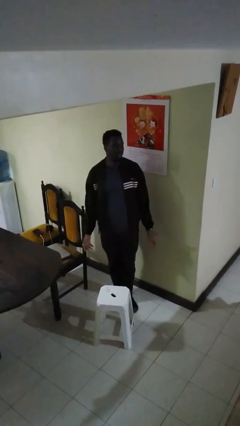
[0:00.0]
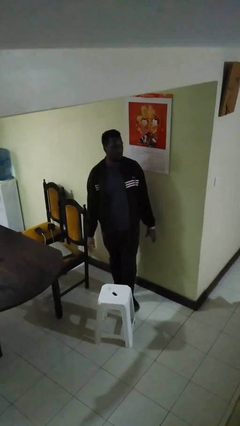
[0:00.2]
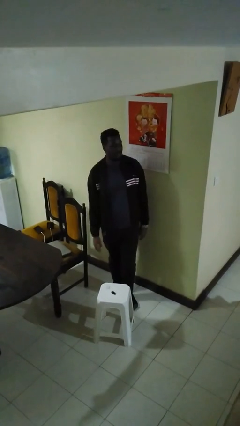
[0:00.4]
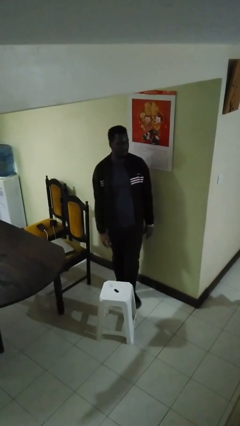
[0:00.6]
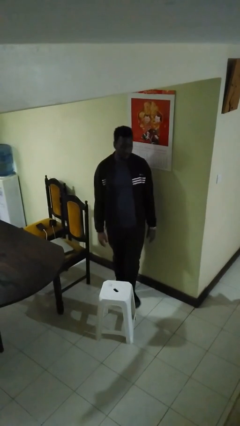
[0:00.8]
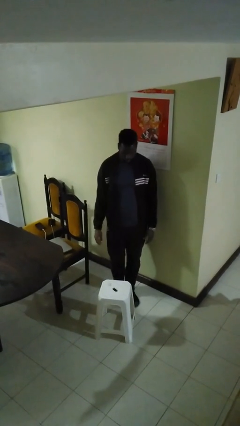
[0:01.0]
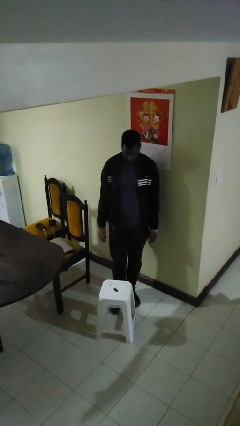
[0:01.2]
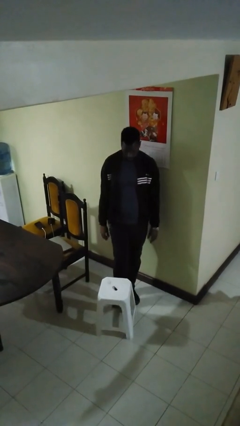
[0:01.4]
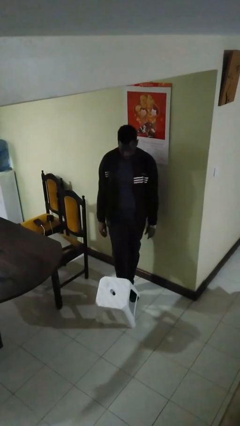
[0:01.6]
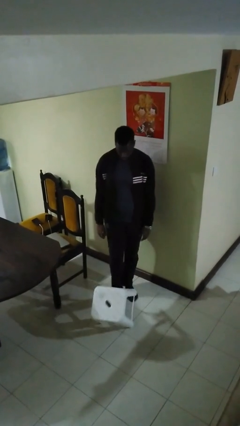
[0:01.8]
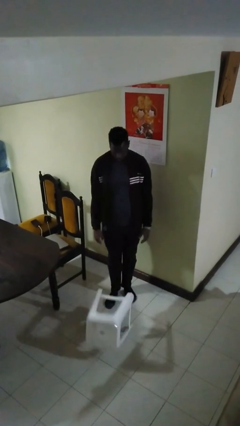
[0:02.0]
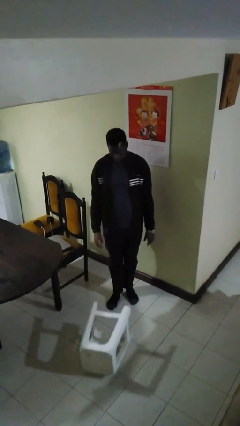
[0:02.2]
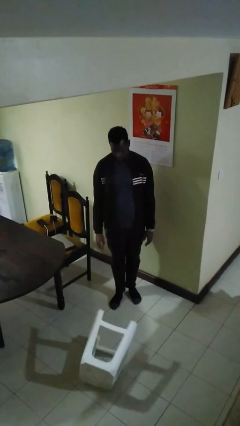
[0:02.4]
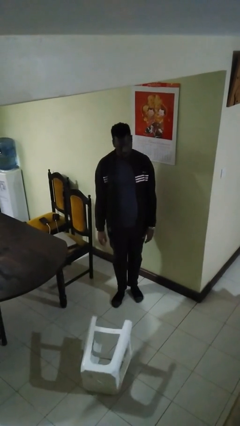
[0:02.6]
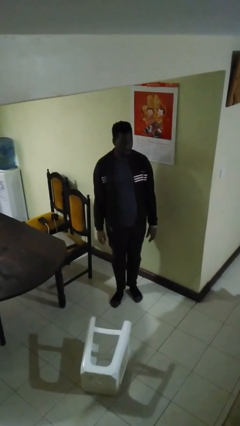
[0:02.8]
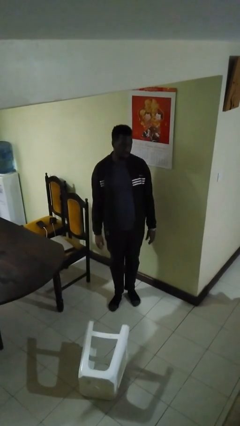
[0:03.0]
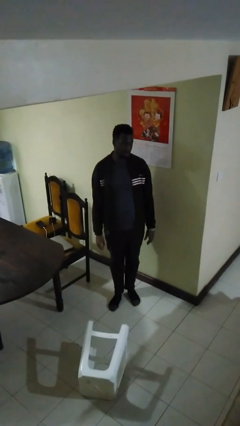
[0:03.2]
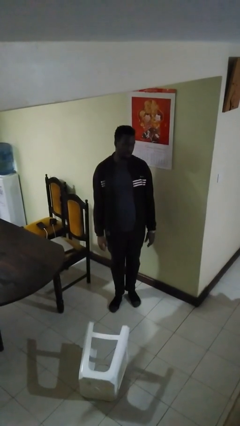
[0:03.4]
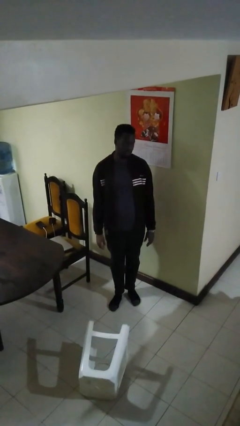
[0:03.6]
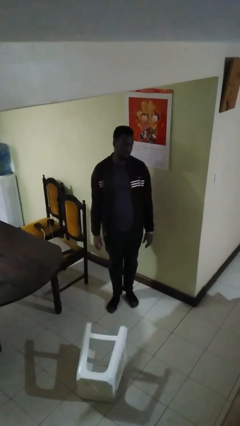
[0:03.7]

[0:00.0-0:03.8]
person knocks over furniture

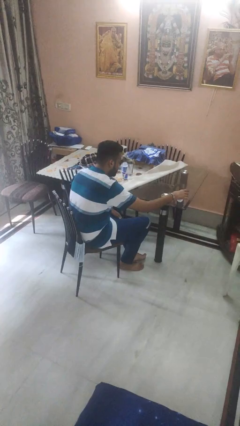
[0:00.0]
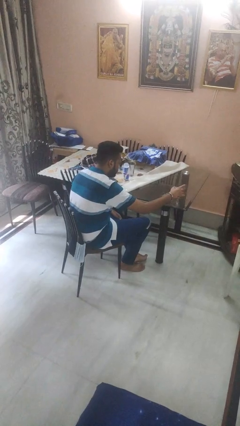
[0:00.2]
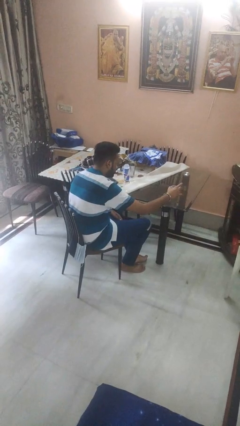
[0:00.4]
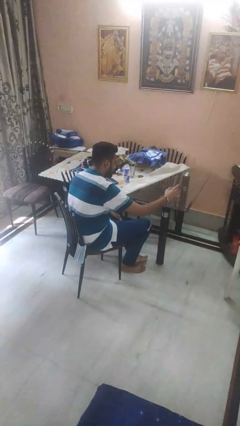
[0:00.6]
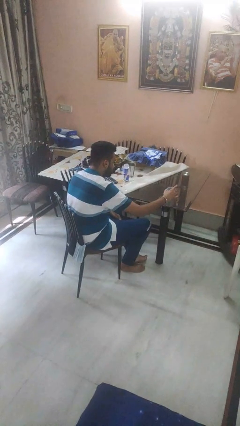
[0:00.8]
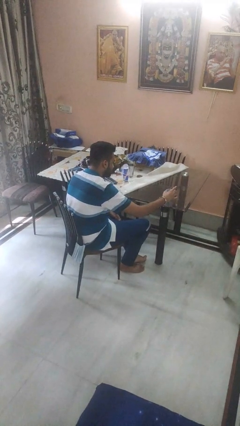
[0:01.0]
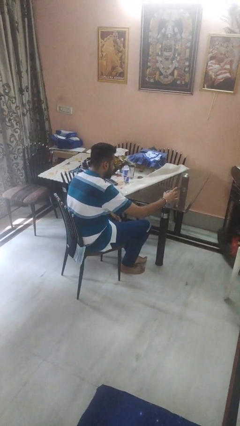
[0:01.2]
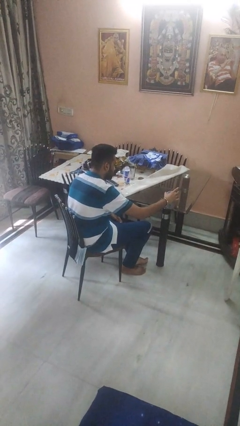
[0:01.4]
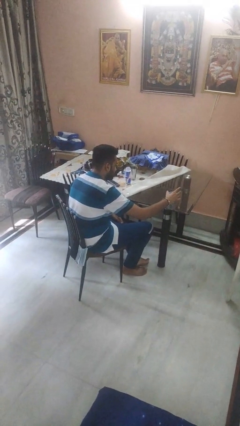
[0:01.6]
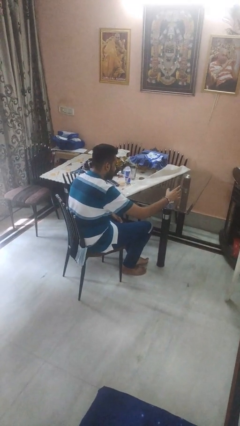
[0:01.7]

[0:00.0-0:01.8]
person sets upright glass

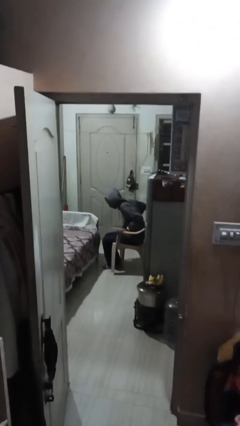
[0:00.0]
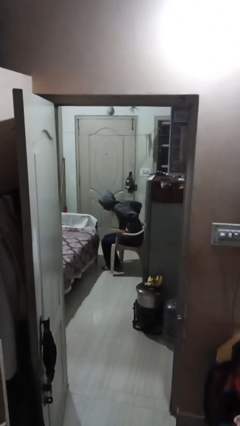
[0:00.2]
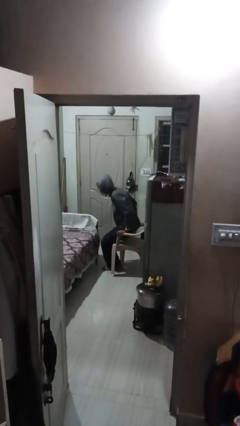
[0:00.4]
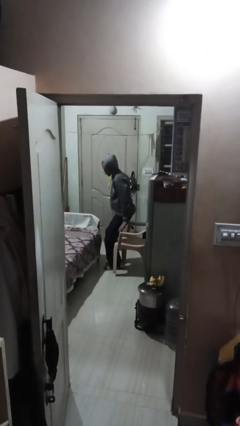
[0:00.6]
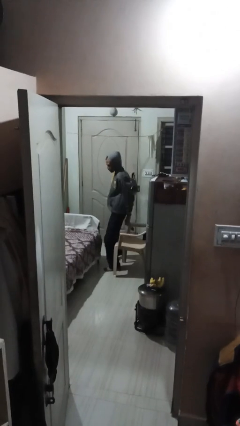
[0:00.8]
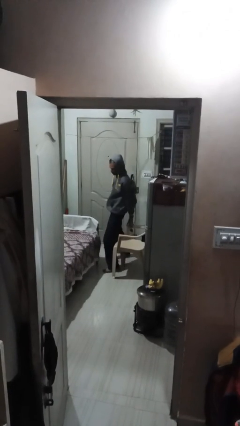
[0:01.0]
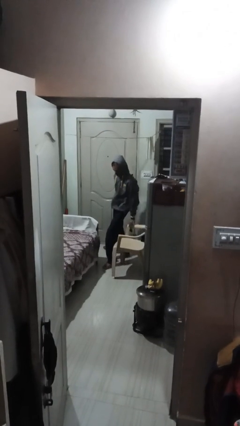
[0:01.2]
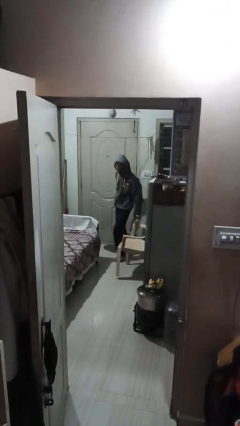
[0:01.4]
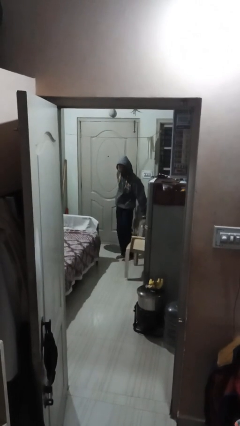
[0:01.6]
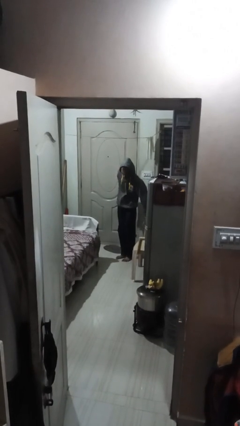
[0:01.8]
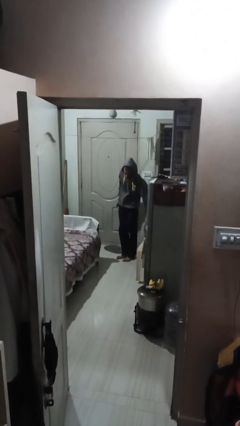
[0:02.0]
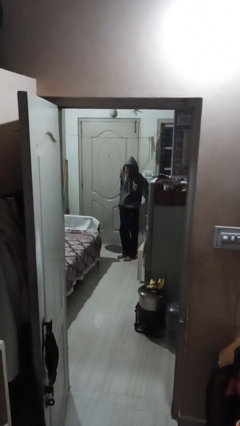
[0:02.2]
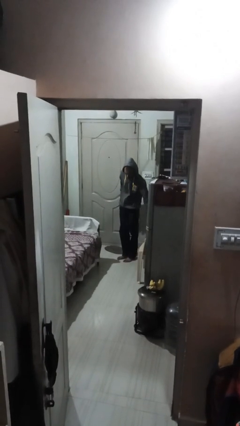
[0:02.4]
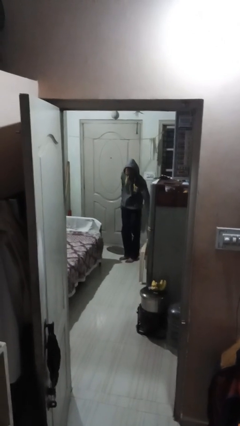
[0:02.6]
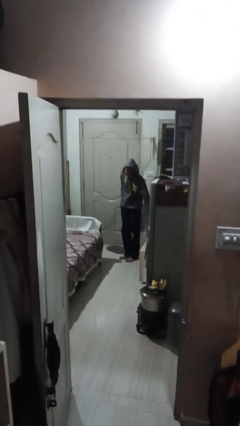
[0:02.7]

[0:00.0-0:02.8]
person stands up

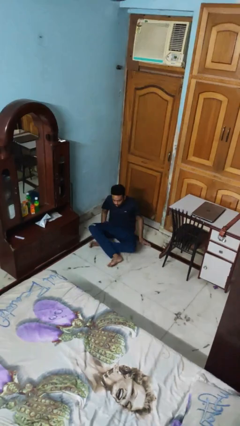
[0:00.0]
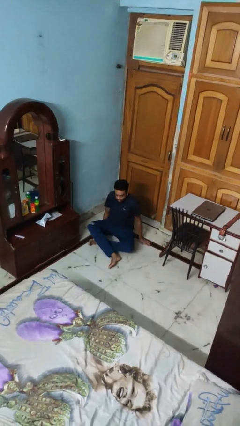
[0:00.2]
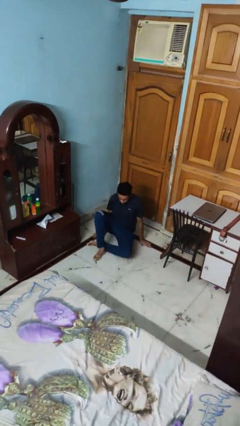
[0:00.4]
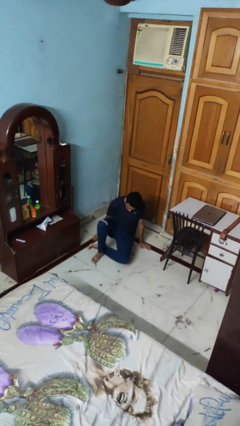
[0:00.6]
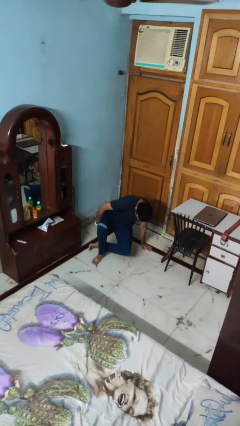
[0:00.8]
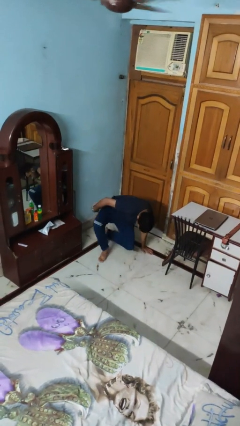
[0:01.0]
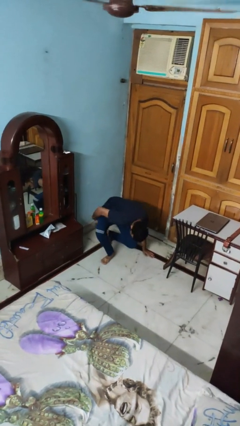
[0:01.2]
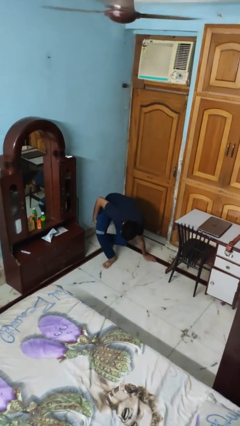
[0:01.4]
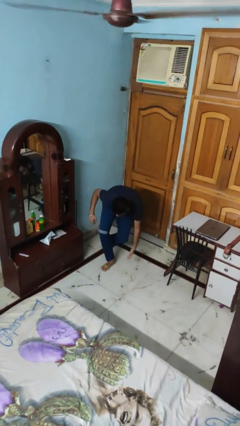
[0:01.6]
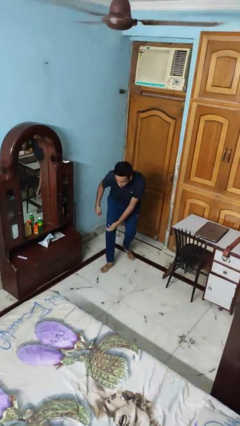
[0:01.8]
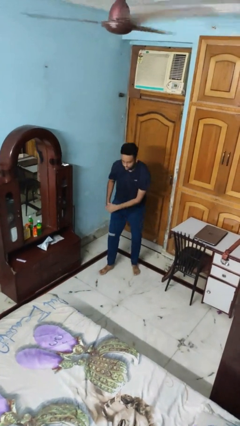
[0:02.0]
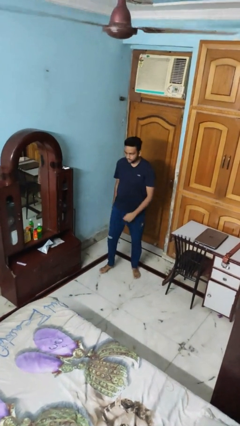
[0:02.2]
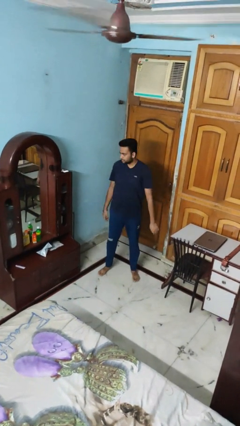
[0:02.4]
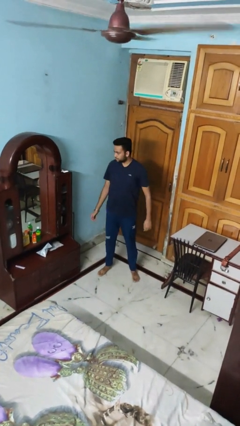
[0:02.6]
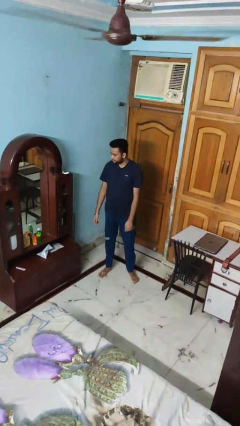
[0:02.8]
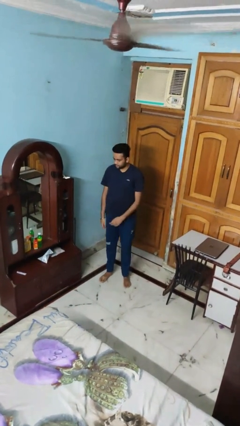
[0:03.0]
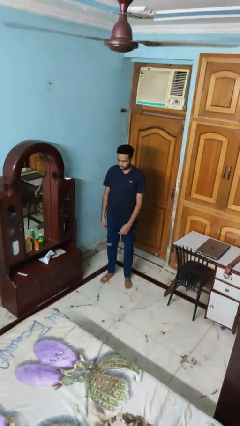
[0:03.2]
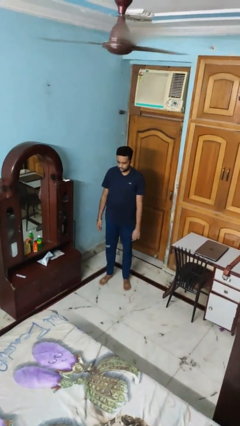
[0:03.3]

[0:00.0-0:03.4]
person stands up from floor

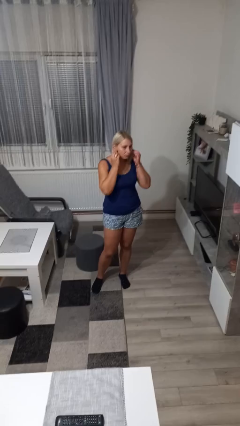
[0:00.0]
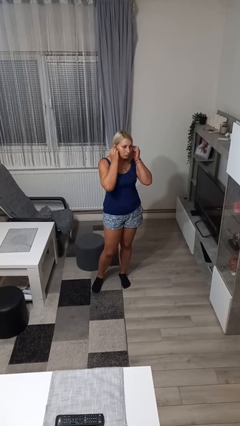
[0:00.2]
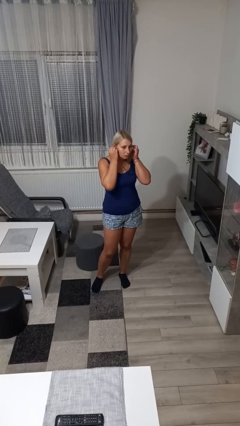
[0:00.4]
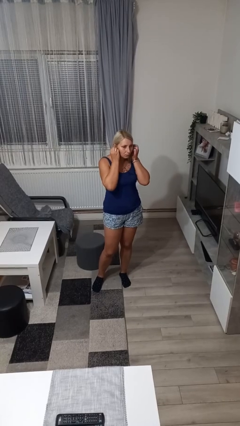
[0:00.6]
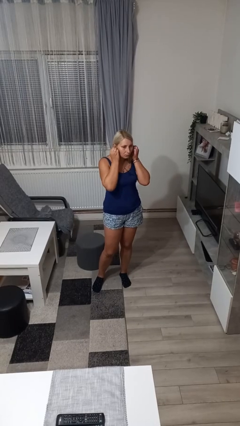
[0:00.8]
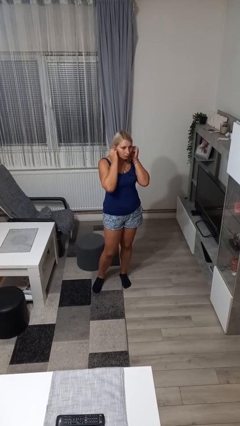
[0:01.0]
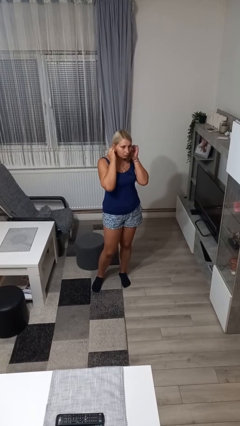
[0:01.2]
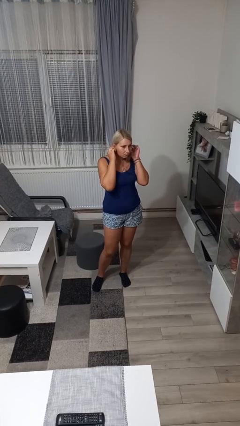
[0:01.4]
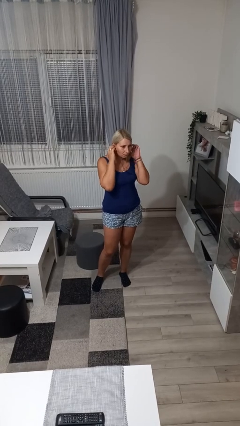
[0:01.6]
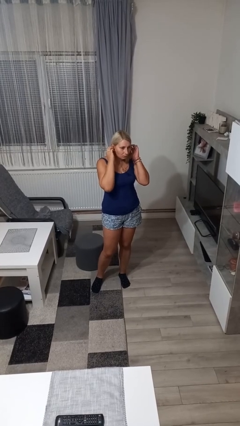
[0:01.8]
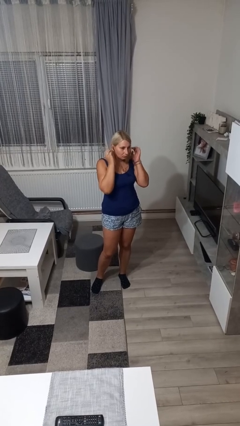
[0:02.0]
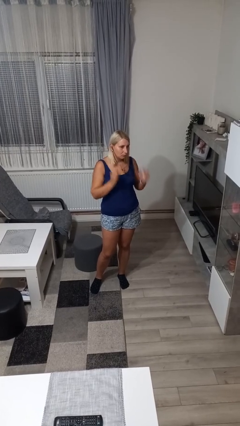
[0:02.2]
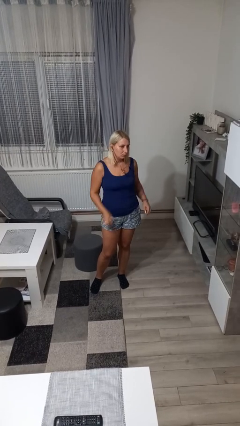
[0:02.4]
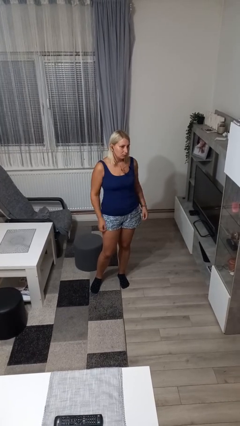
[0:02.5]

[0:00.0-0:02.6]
person puts on headphones

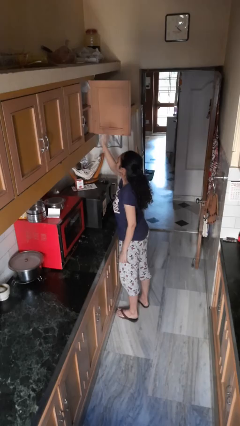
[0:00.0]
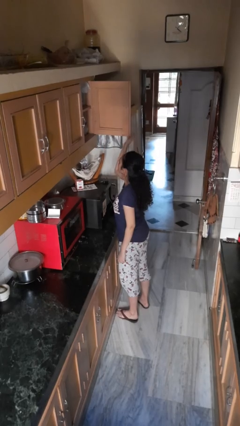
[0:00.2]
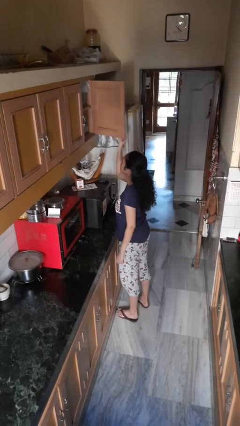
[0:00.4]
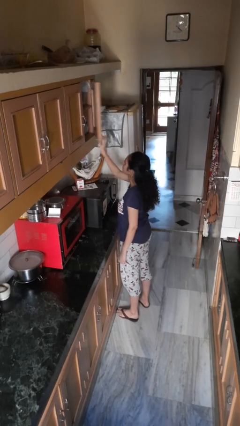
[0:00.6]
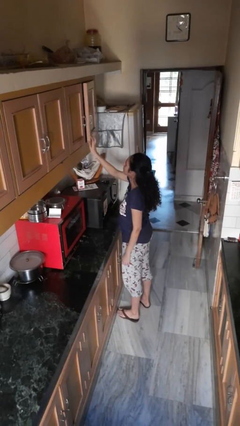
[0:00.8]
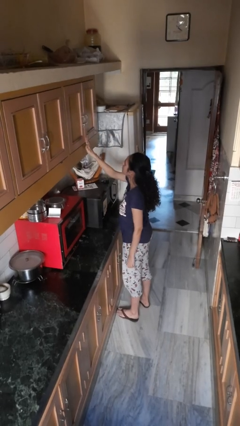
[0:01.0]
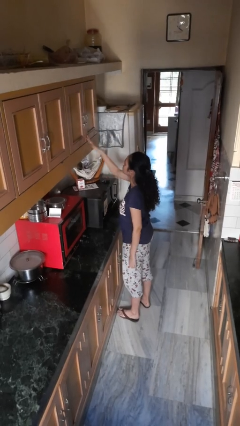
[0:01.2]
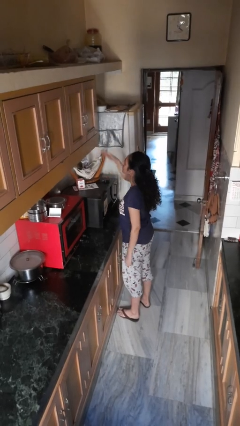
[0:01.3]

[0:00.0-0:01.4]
person puts object in cabinet

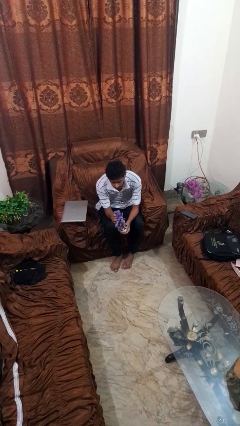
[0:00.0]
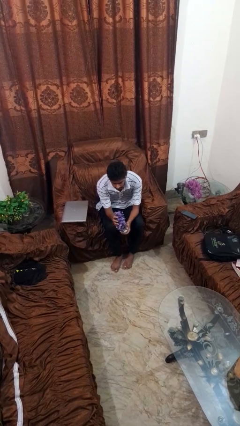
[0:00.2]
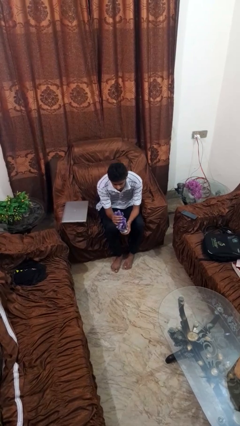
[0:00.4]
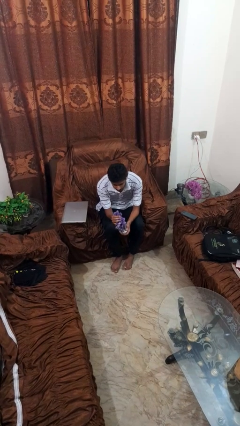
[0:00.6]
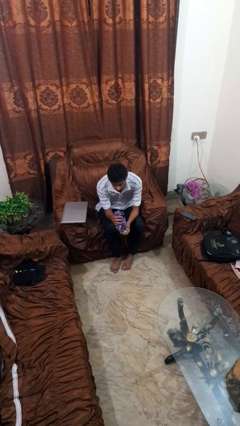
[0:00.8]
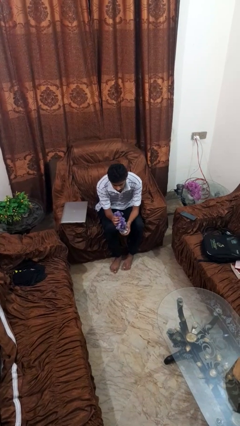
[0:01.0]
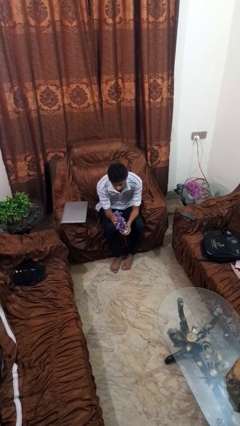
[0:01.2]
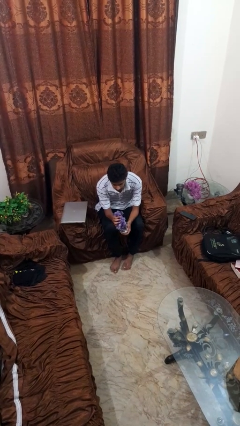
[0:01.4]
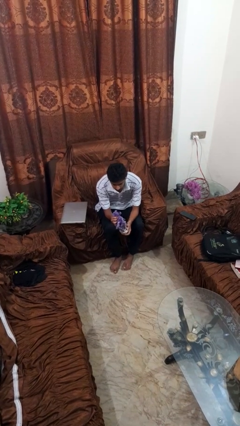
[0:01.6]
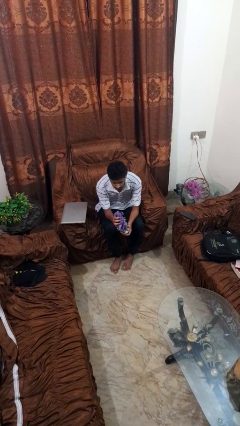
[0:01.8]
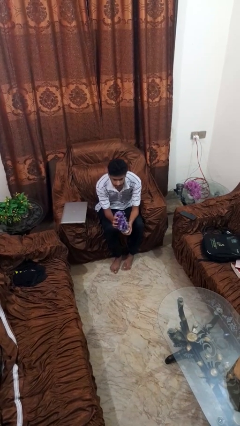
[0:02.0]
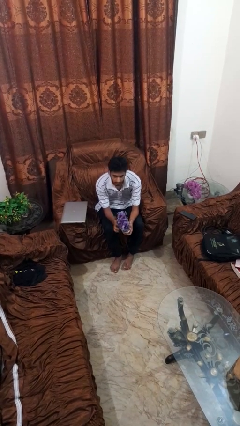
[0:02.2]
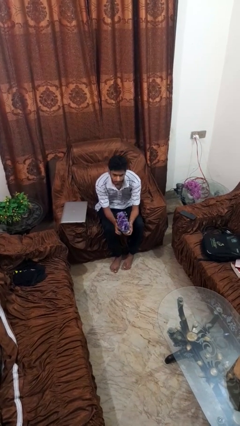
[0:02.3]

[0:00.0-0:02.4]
person squeezes object
